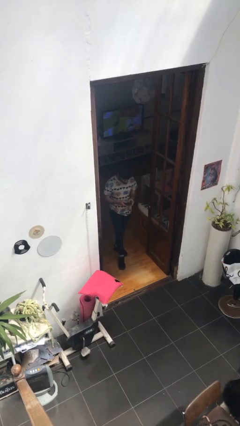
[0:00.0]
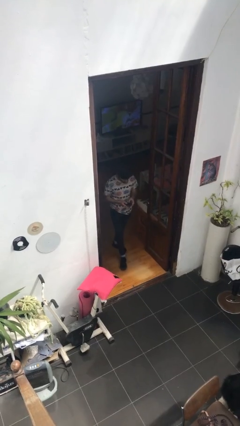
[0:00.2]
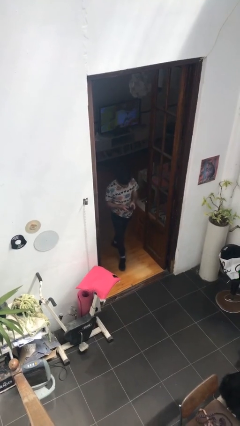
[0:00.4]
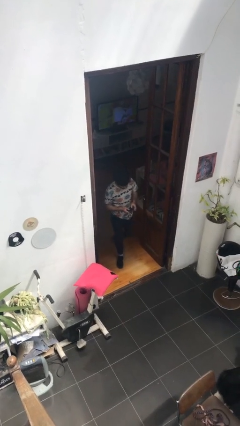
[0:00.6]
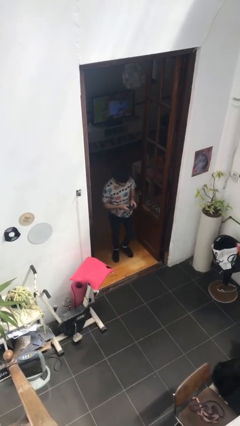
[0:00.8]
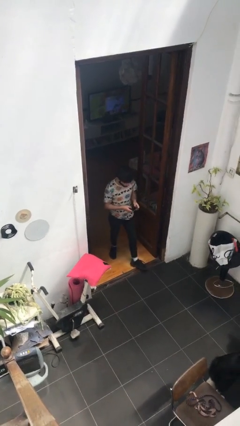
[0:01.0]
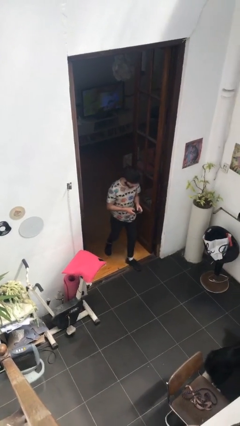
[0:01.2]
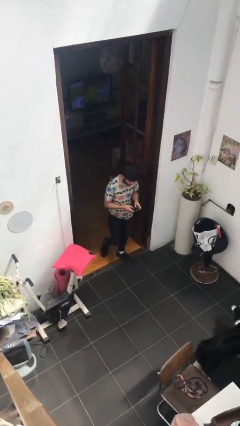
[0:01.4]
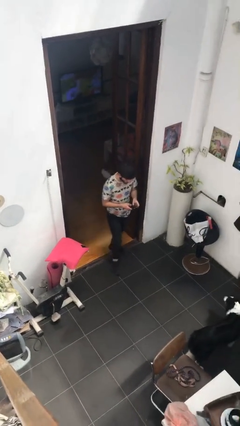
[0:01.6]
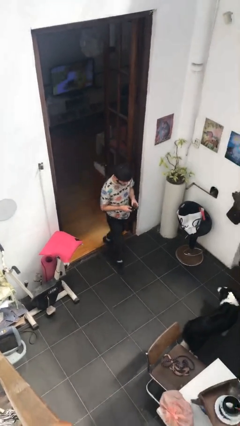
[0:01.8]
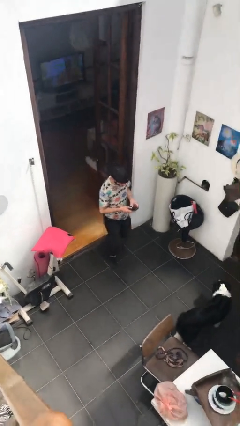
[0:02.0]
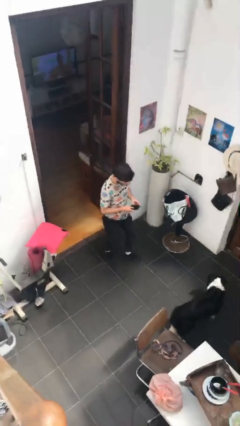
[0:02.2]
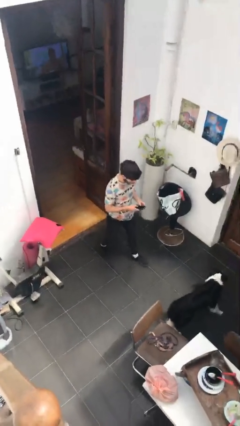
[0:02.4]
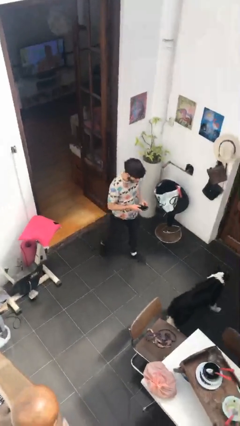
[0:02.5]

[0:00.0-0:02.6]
person enters scene through structure

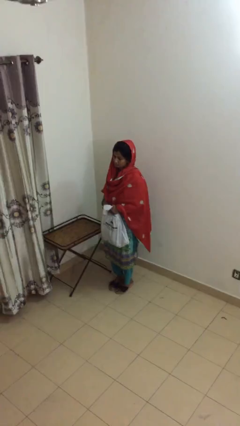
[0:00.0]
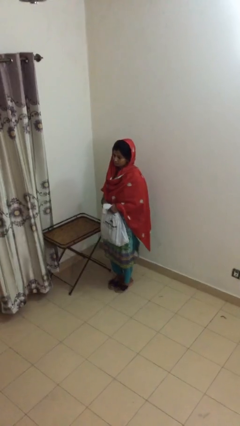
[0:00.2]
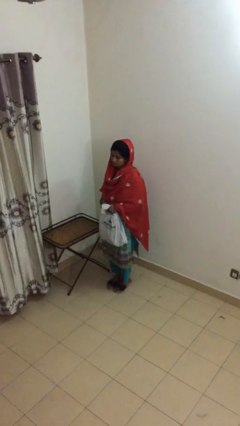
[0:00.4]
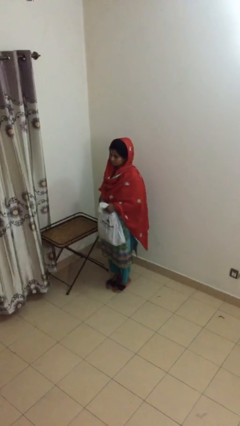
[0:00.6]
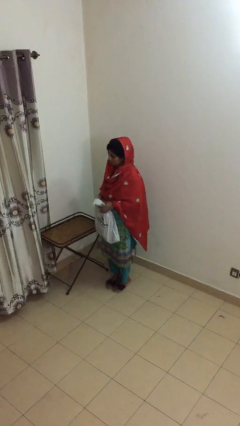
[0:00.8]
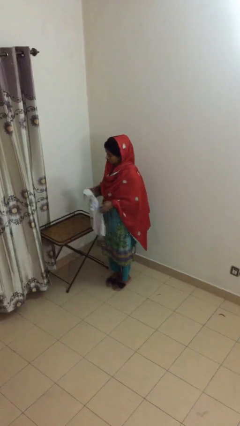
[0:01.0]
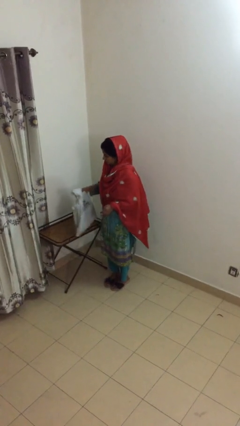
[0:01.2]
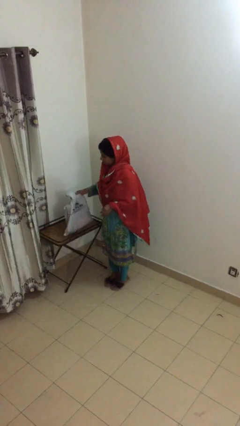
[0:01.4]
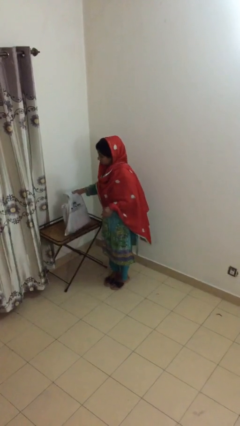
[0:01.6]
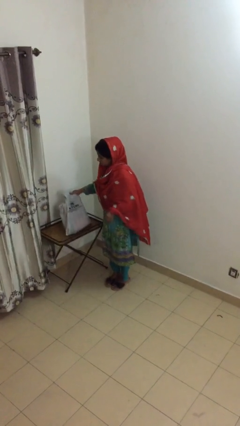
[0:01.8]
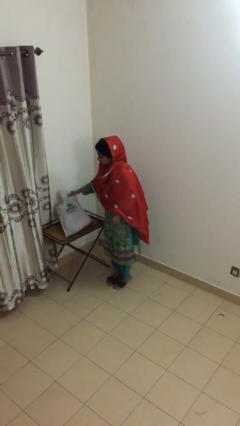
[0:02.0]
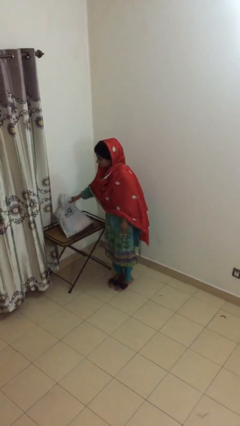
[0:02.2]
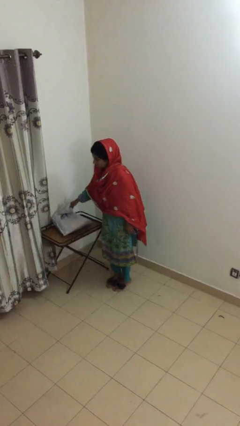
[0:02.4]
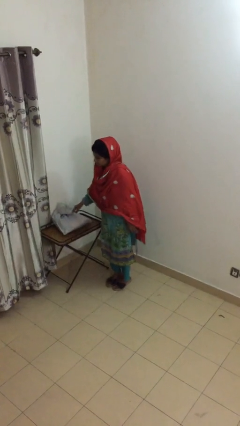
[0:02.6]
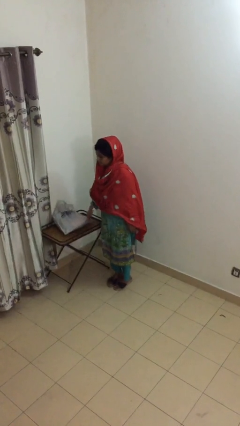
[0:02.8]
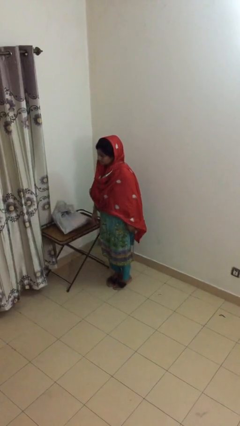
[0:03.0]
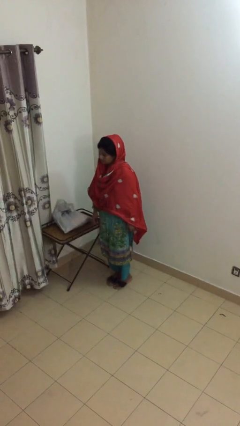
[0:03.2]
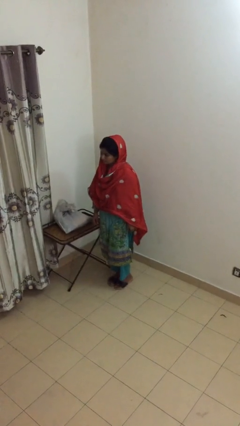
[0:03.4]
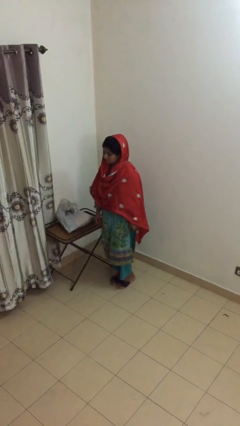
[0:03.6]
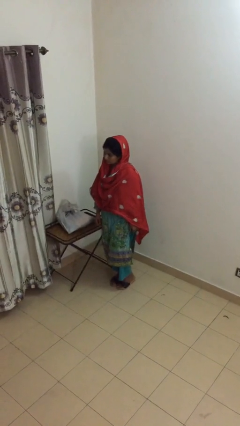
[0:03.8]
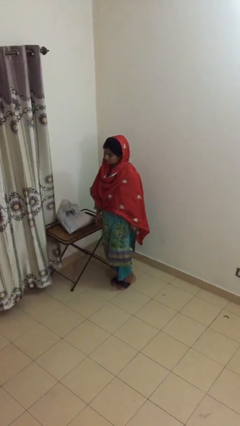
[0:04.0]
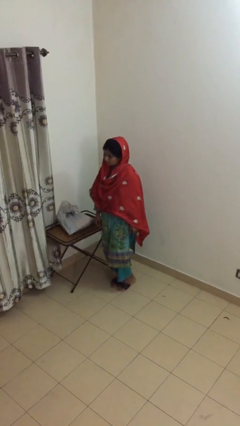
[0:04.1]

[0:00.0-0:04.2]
person puts down object on table

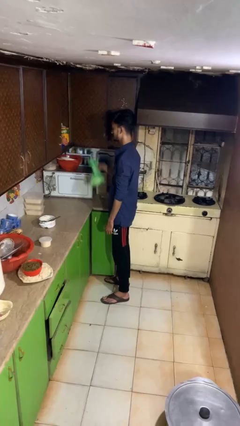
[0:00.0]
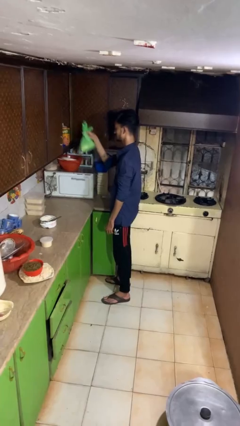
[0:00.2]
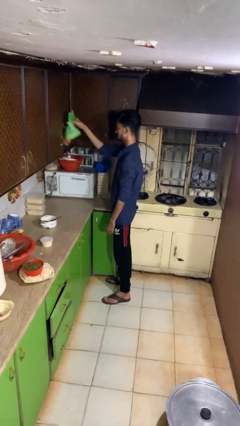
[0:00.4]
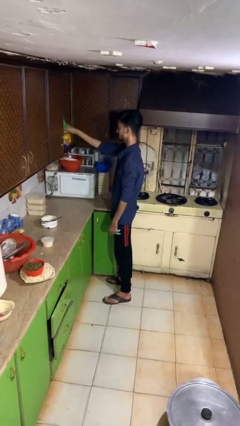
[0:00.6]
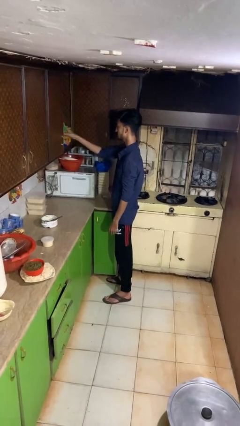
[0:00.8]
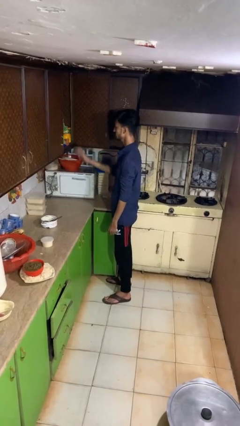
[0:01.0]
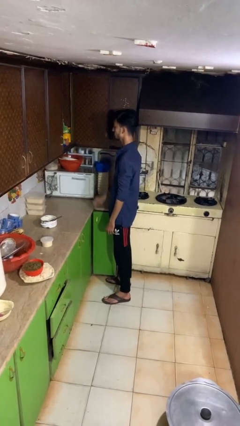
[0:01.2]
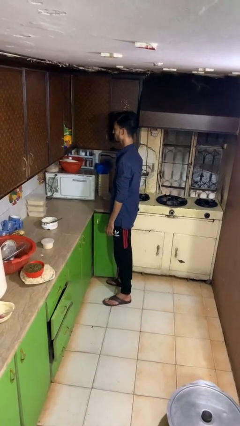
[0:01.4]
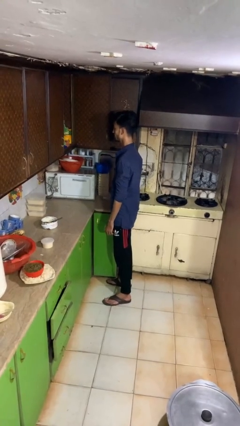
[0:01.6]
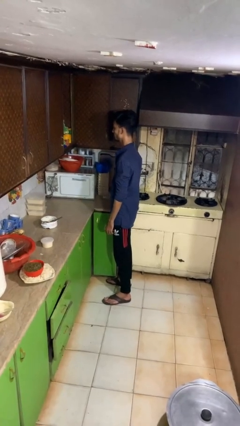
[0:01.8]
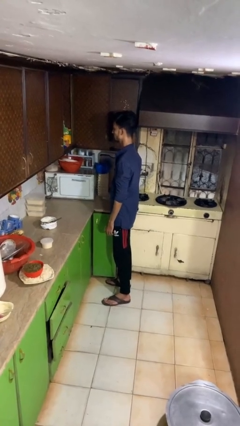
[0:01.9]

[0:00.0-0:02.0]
person loads groceries into cabinet

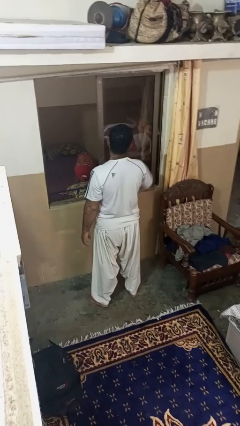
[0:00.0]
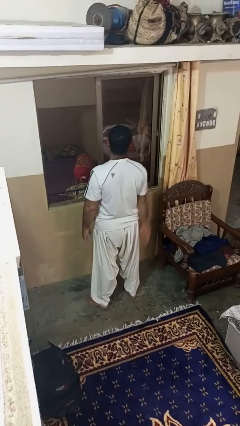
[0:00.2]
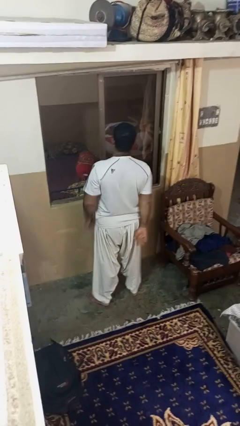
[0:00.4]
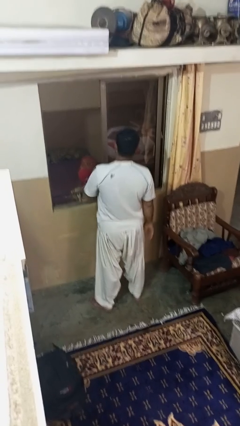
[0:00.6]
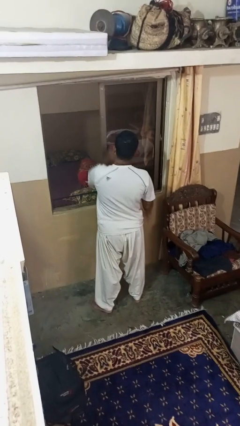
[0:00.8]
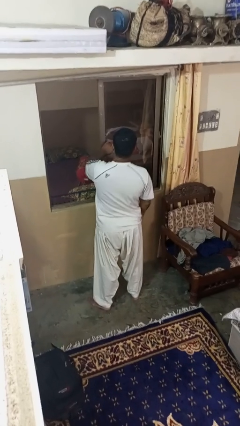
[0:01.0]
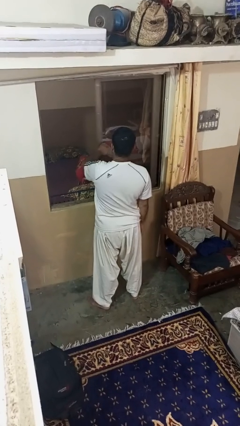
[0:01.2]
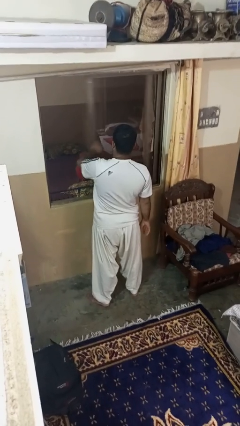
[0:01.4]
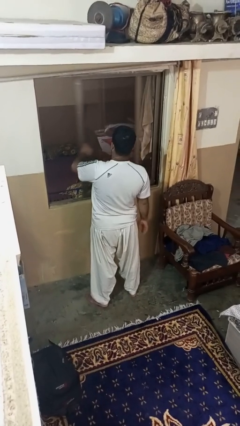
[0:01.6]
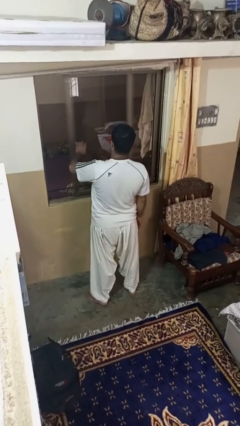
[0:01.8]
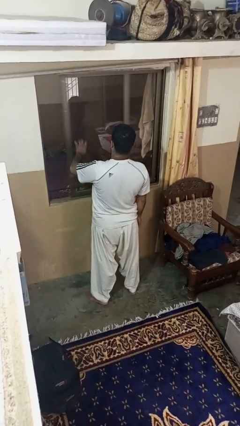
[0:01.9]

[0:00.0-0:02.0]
person closes home window

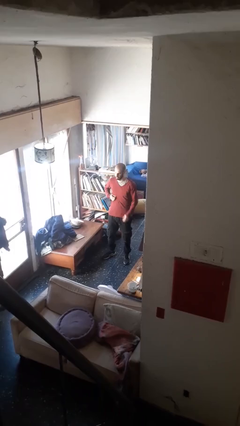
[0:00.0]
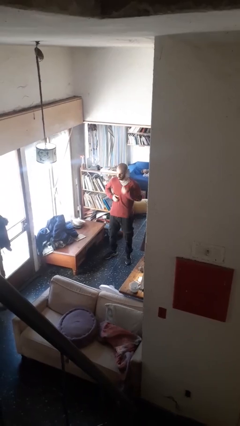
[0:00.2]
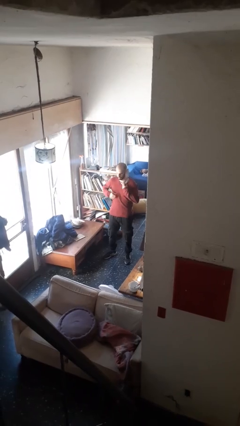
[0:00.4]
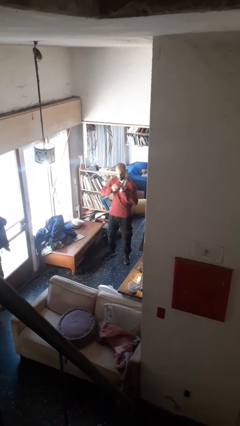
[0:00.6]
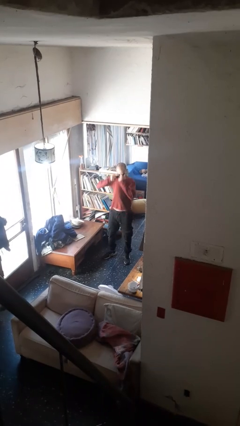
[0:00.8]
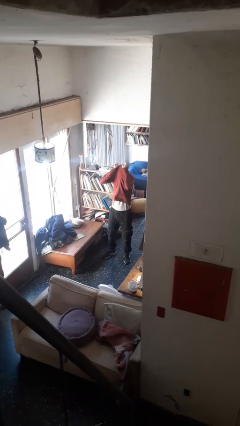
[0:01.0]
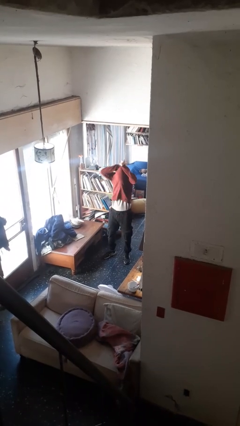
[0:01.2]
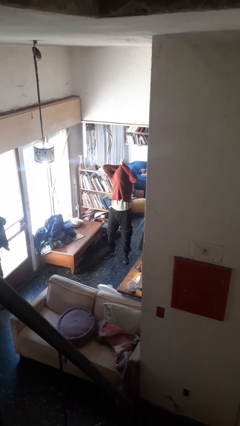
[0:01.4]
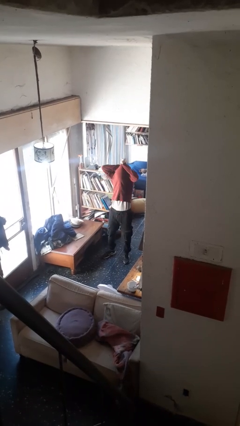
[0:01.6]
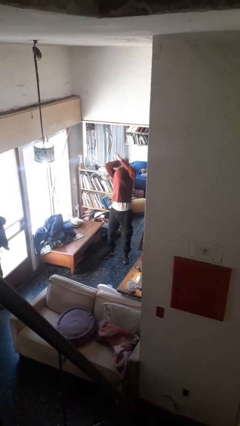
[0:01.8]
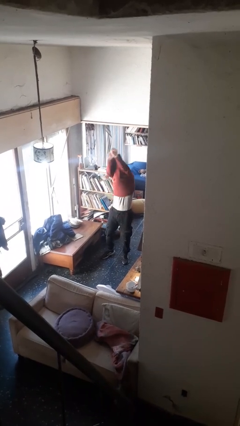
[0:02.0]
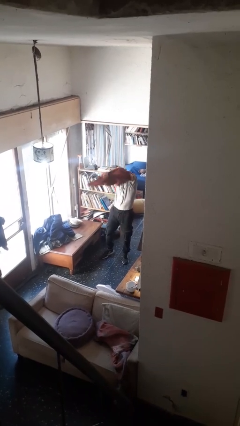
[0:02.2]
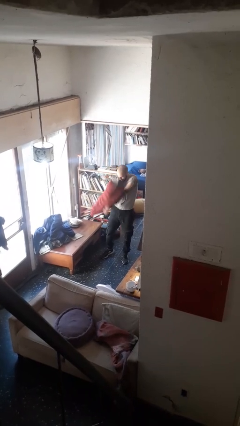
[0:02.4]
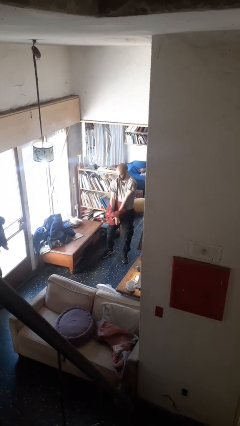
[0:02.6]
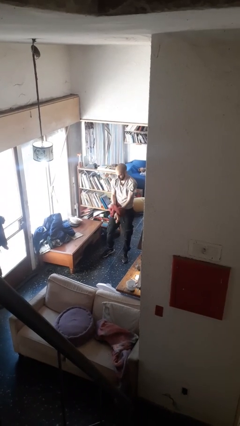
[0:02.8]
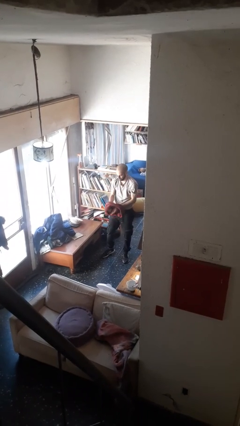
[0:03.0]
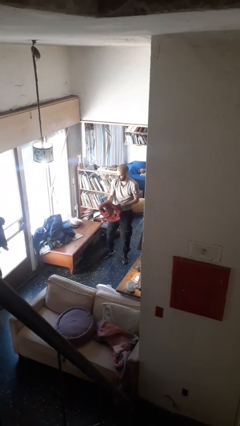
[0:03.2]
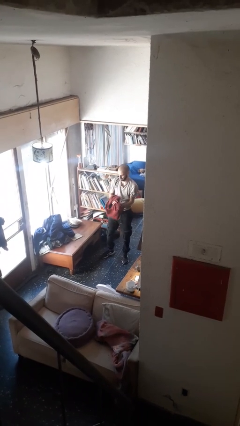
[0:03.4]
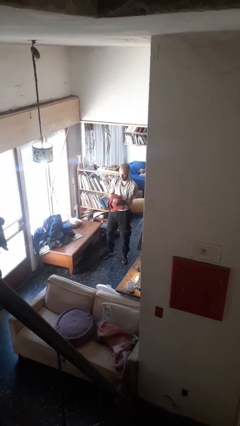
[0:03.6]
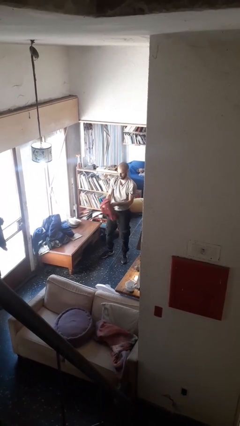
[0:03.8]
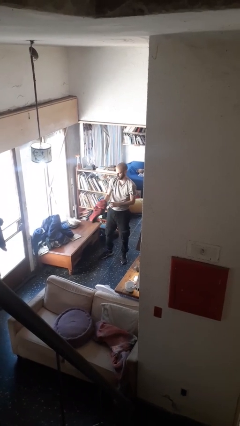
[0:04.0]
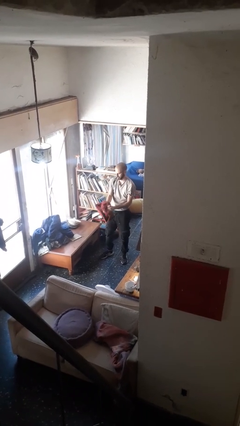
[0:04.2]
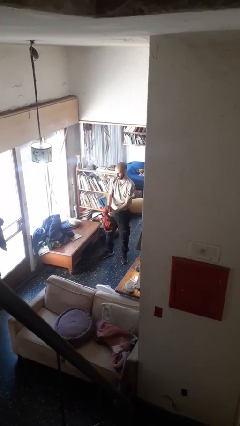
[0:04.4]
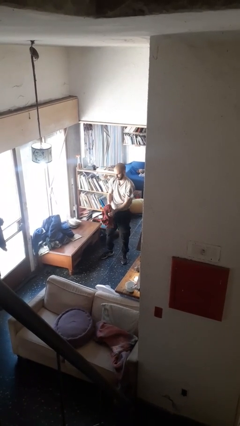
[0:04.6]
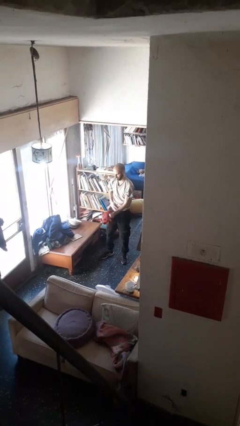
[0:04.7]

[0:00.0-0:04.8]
person takes off shirt

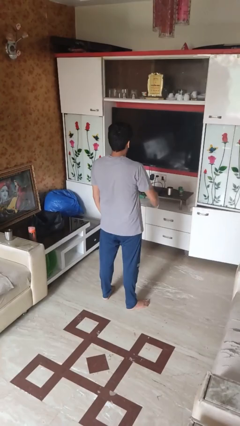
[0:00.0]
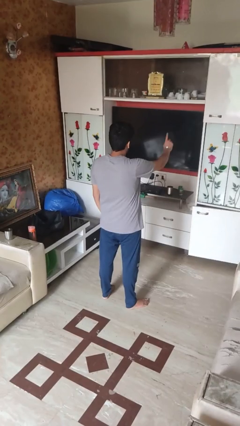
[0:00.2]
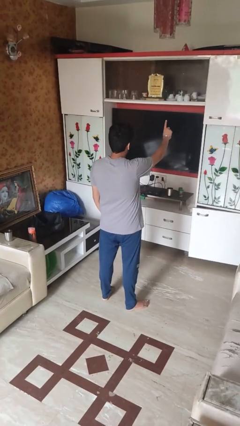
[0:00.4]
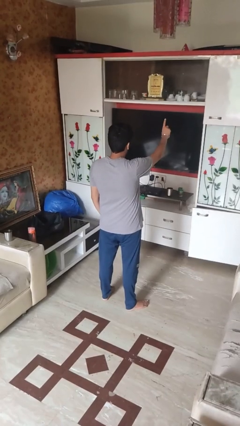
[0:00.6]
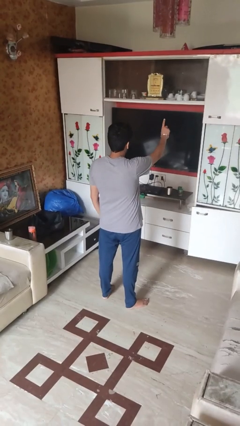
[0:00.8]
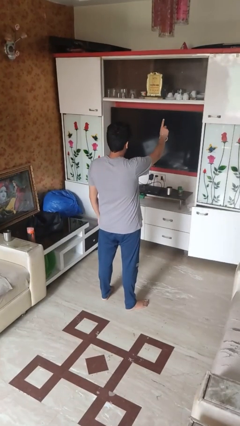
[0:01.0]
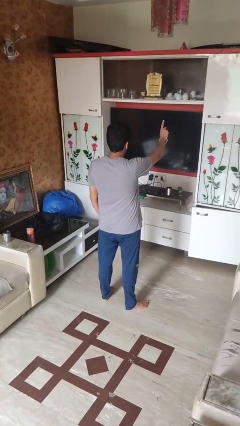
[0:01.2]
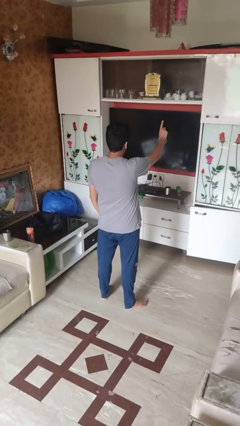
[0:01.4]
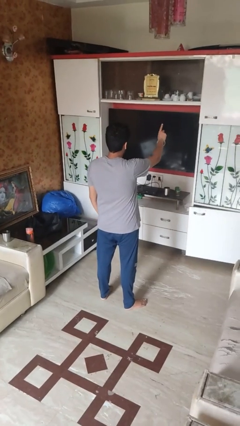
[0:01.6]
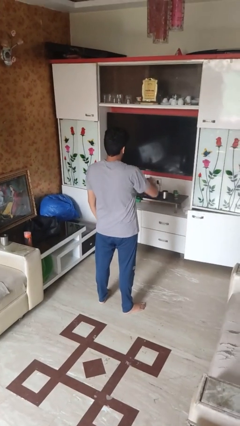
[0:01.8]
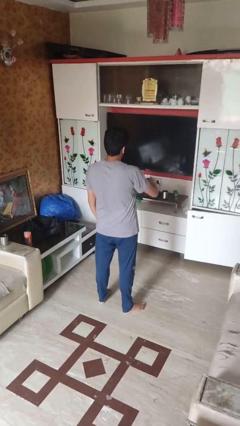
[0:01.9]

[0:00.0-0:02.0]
person gestures number one
